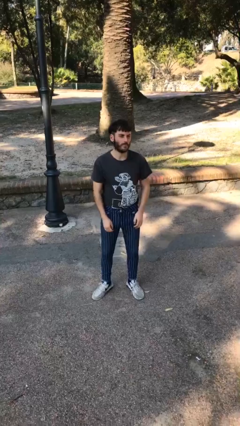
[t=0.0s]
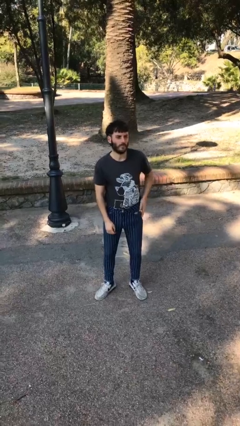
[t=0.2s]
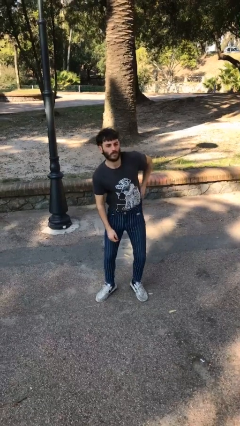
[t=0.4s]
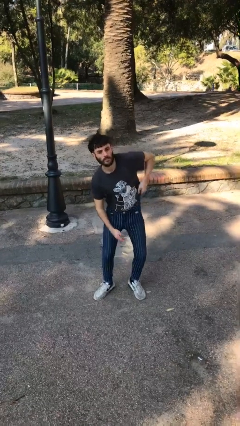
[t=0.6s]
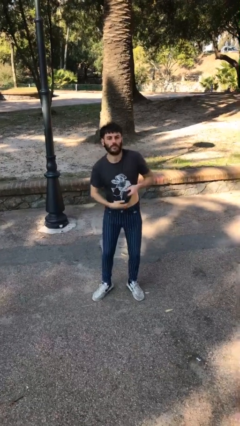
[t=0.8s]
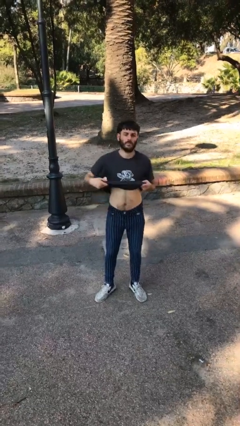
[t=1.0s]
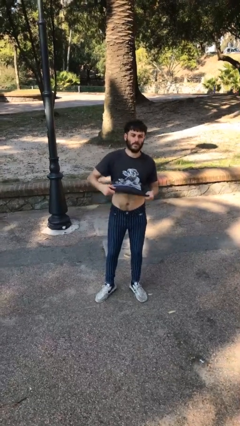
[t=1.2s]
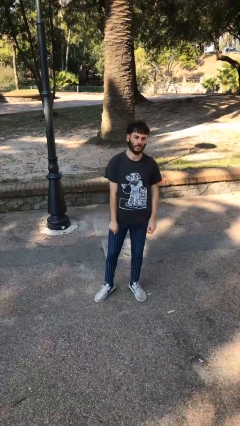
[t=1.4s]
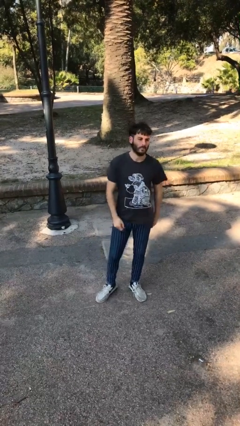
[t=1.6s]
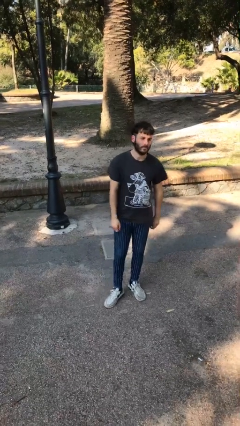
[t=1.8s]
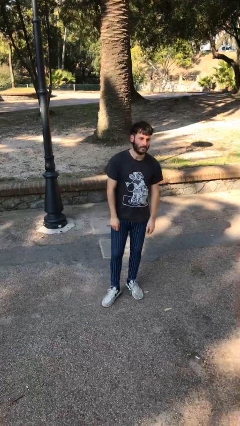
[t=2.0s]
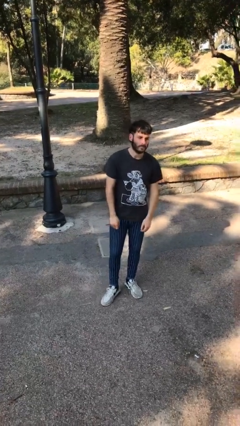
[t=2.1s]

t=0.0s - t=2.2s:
person untucks shirt

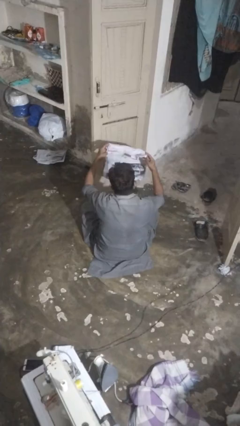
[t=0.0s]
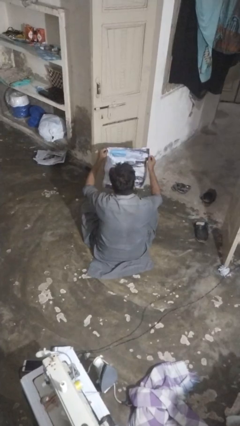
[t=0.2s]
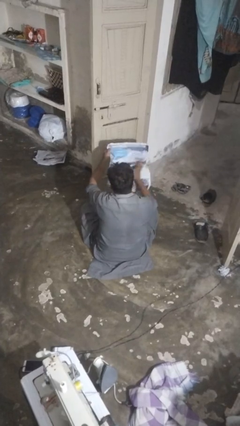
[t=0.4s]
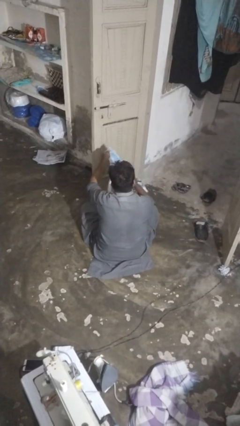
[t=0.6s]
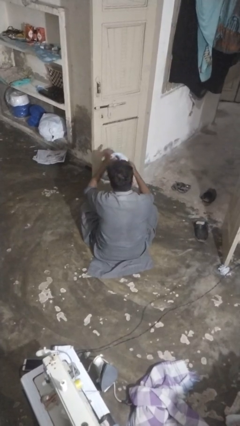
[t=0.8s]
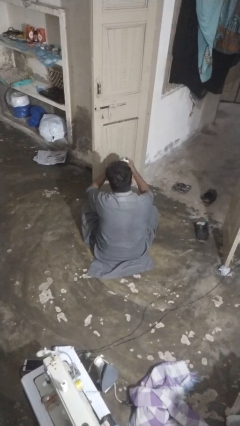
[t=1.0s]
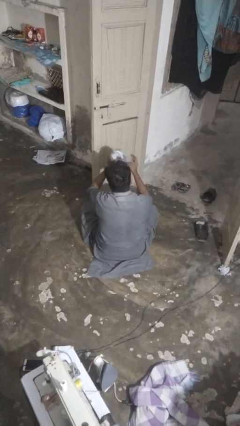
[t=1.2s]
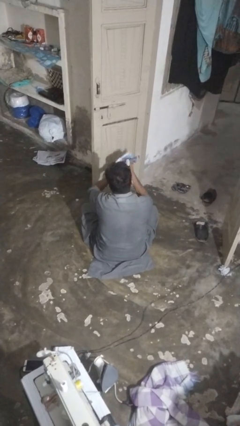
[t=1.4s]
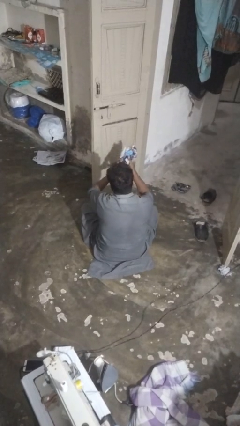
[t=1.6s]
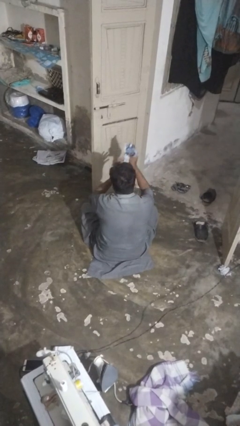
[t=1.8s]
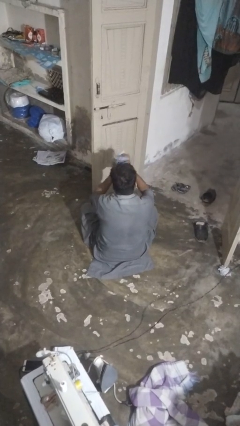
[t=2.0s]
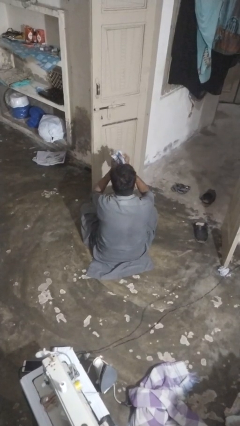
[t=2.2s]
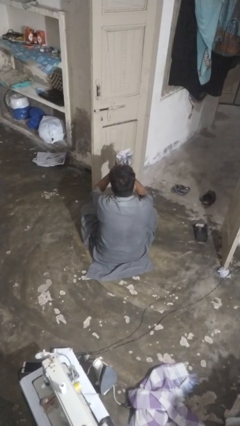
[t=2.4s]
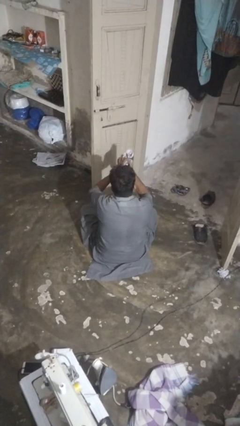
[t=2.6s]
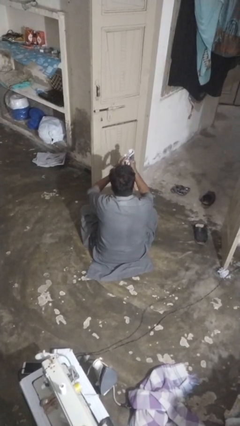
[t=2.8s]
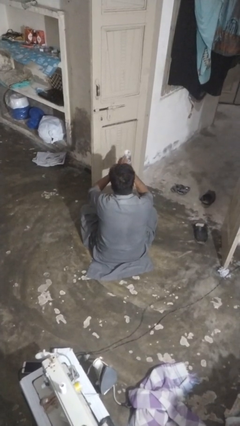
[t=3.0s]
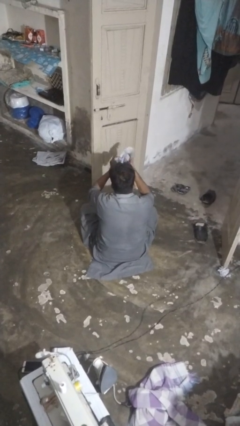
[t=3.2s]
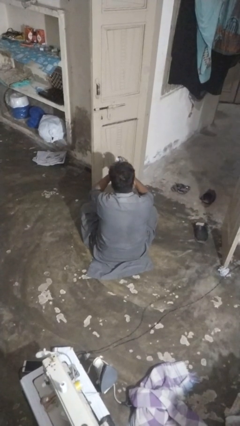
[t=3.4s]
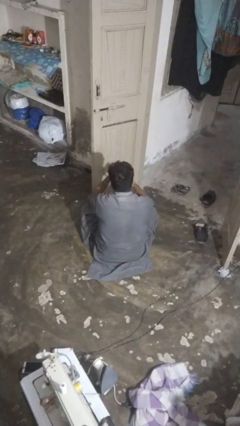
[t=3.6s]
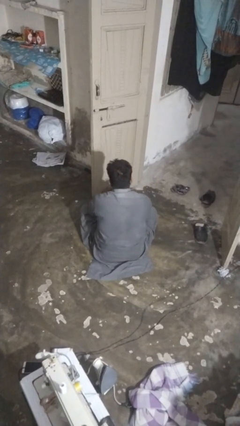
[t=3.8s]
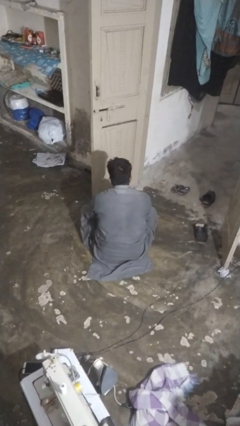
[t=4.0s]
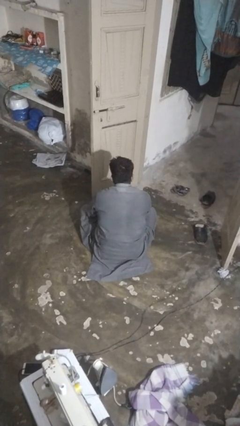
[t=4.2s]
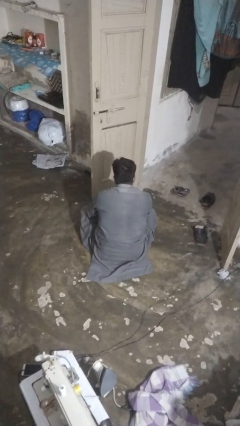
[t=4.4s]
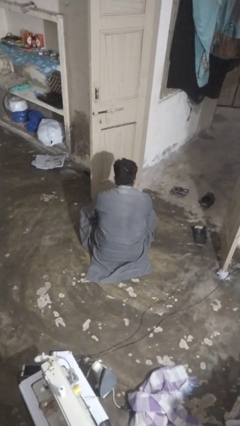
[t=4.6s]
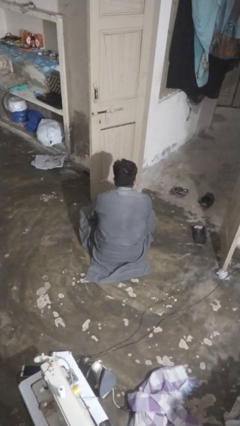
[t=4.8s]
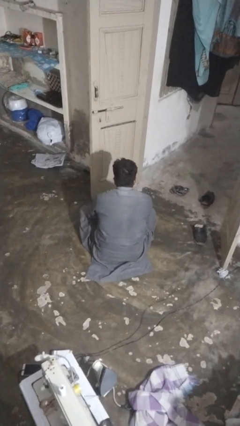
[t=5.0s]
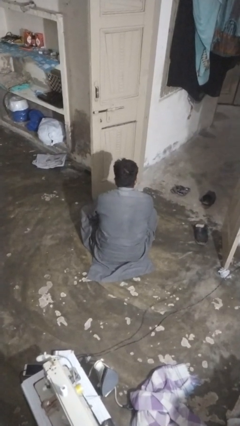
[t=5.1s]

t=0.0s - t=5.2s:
person crumples paper

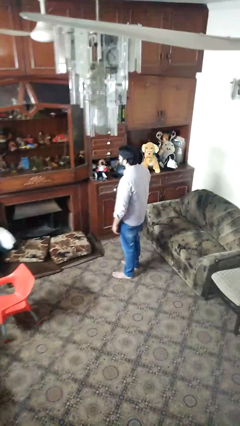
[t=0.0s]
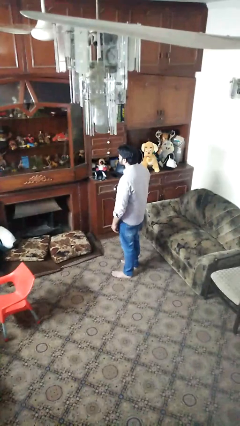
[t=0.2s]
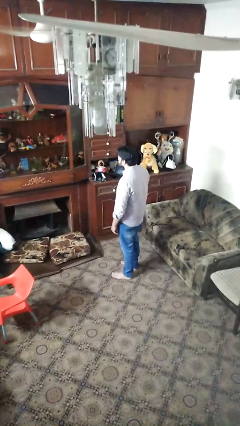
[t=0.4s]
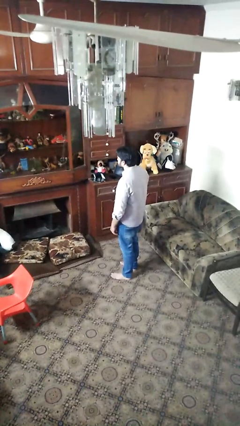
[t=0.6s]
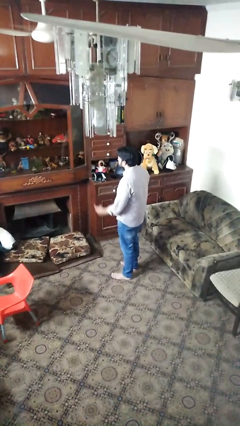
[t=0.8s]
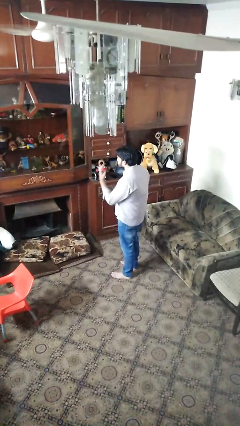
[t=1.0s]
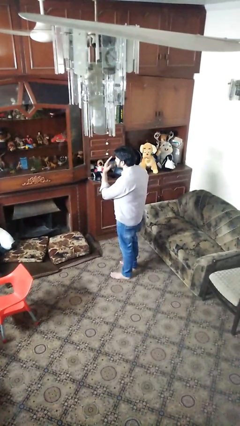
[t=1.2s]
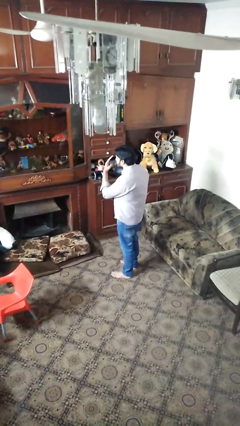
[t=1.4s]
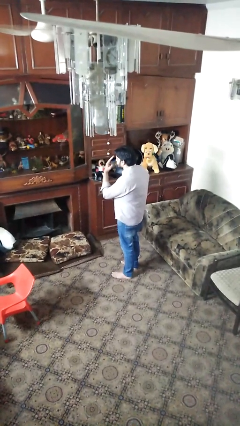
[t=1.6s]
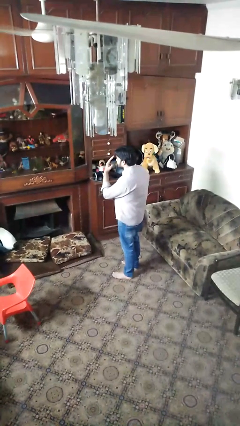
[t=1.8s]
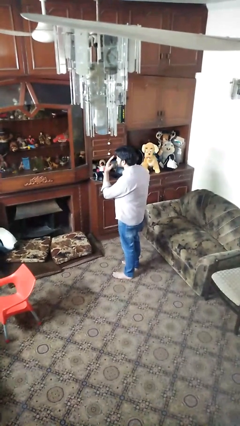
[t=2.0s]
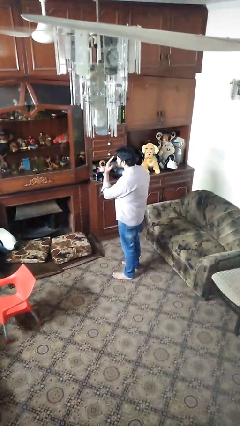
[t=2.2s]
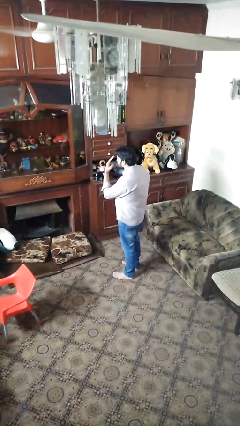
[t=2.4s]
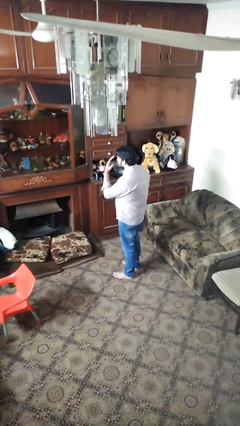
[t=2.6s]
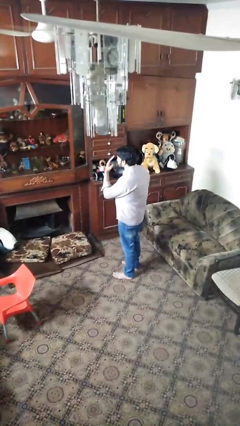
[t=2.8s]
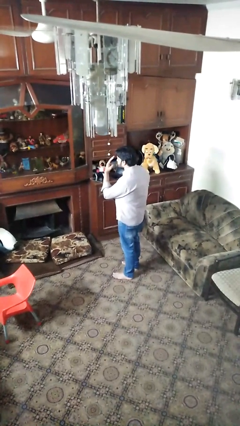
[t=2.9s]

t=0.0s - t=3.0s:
person gestures watch closely

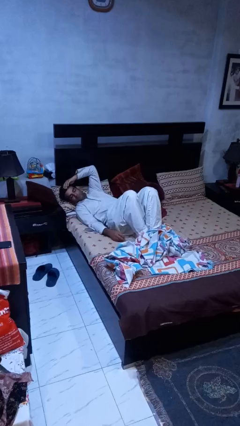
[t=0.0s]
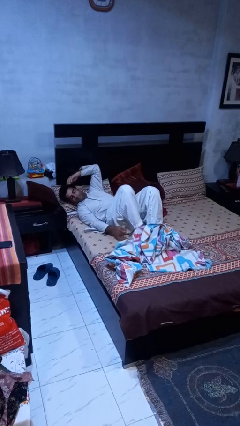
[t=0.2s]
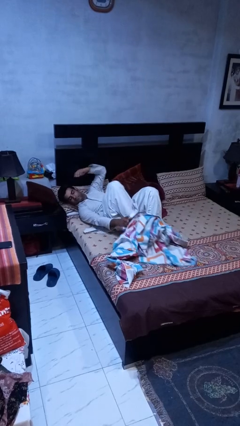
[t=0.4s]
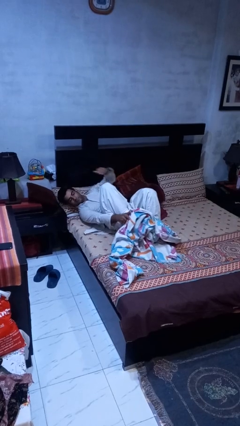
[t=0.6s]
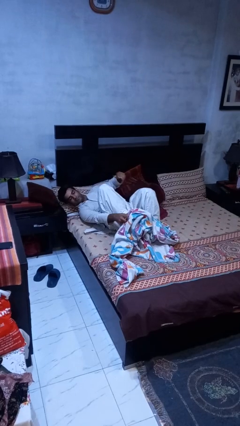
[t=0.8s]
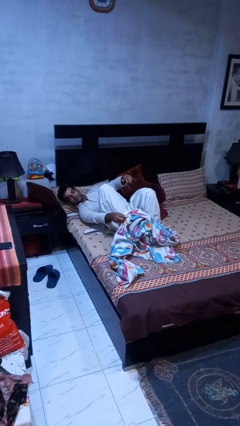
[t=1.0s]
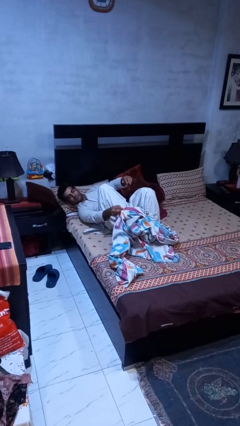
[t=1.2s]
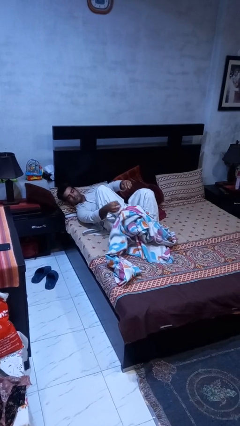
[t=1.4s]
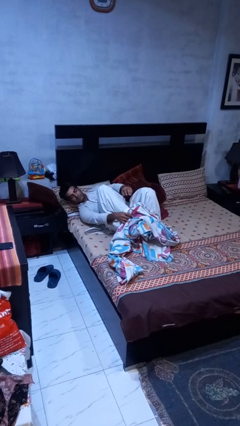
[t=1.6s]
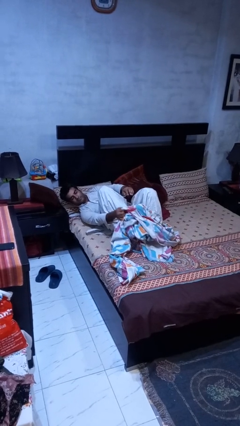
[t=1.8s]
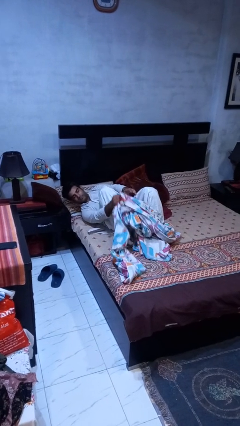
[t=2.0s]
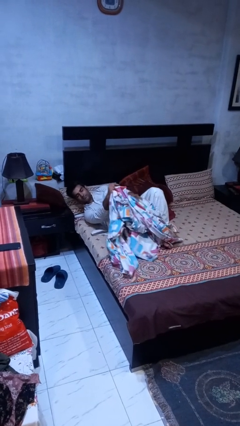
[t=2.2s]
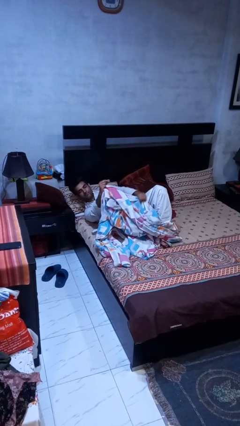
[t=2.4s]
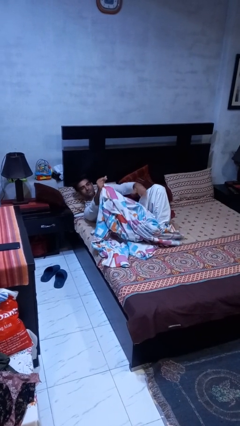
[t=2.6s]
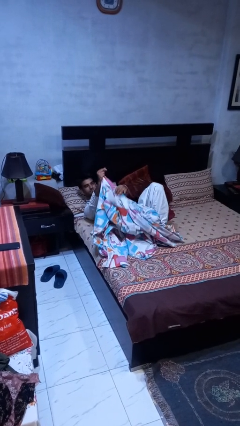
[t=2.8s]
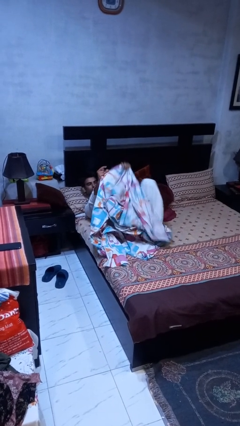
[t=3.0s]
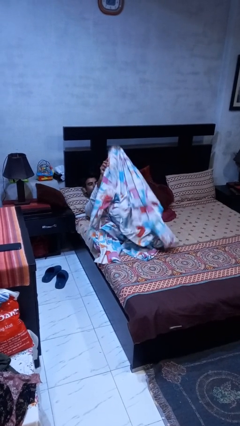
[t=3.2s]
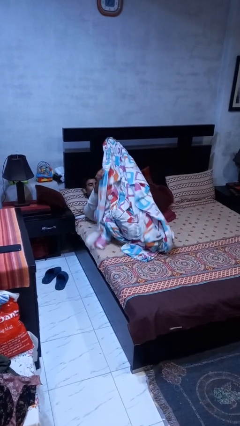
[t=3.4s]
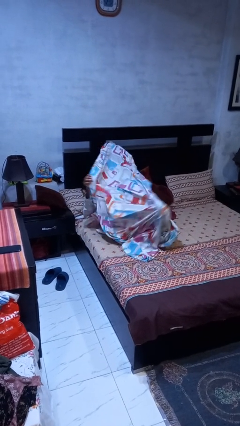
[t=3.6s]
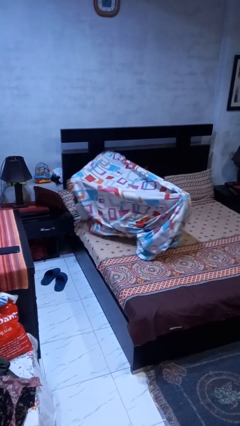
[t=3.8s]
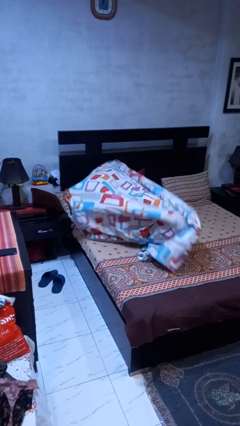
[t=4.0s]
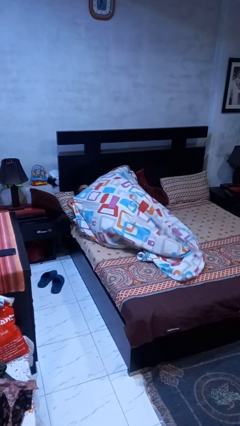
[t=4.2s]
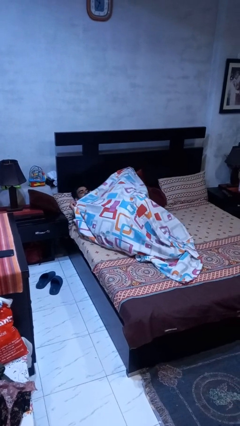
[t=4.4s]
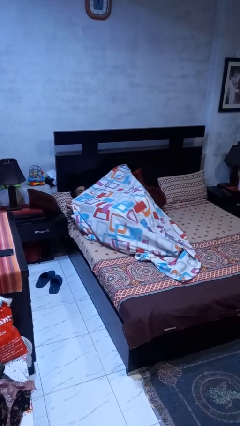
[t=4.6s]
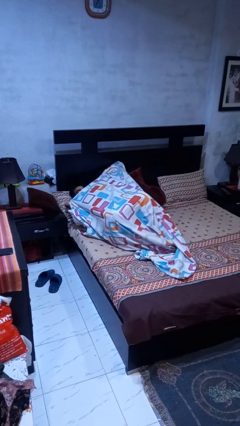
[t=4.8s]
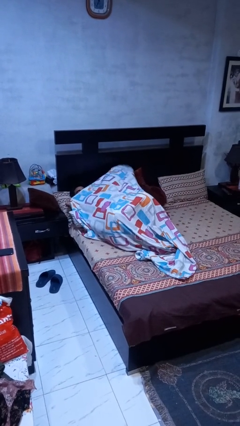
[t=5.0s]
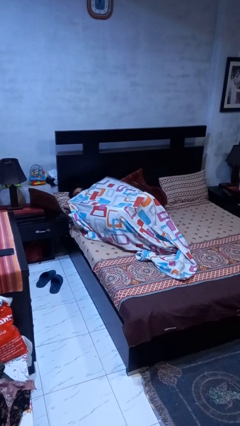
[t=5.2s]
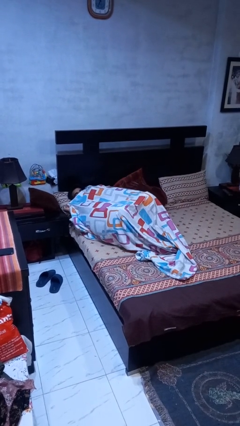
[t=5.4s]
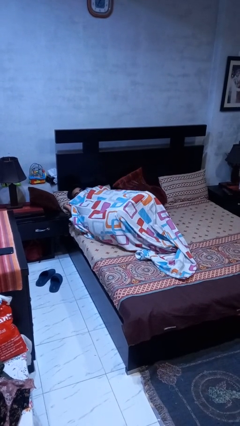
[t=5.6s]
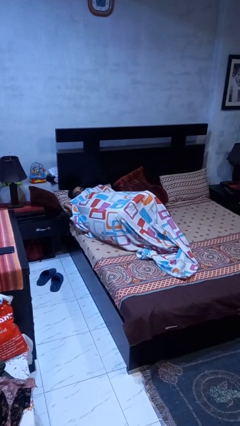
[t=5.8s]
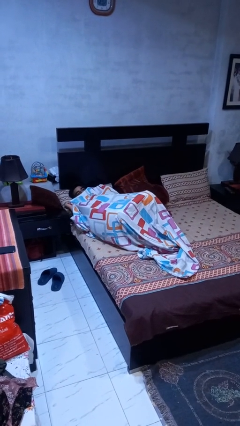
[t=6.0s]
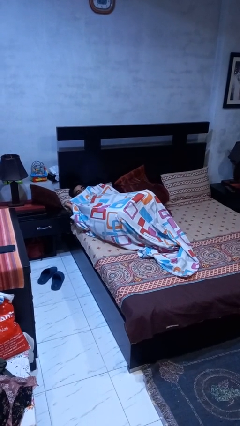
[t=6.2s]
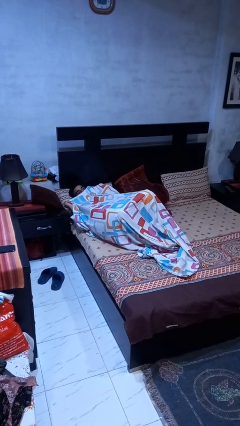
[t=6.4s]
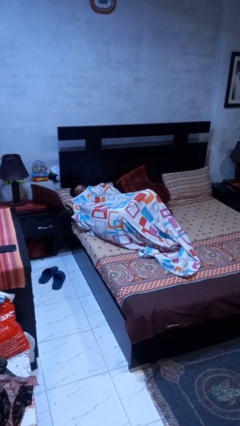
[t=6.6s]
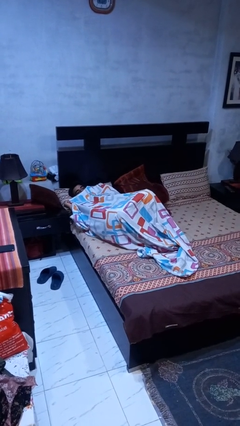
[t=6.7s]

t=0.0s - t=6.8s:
person covers with bedsheets

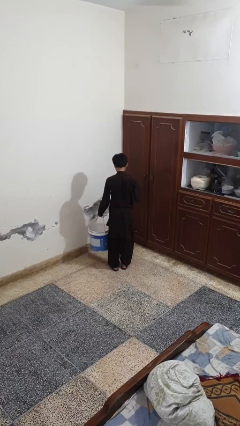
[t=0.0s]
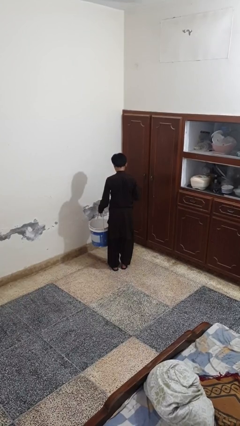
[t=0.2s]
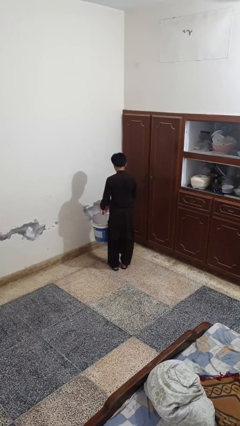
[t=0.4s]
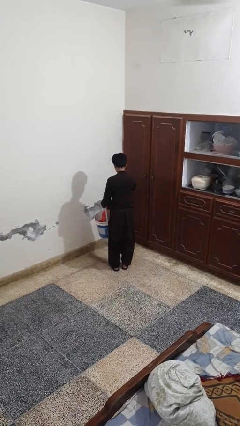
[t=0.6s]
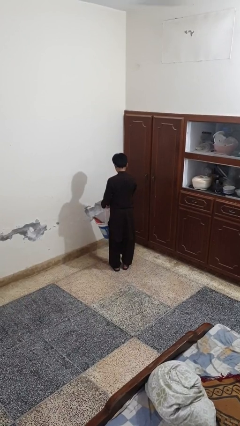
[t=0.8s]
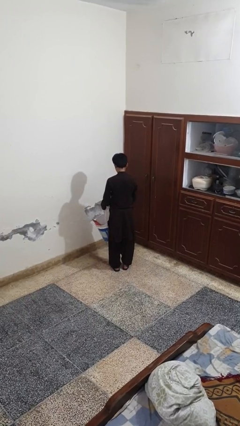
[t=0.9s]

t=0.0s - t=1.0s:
person puts object into basket
